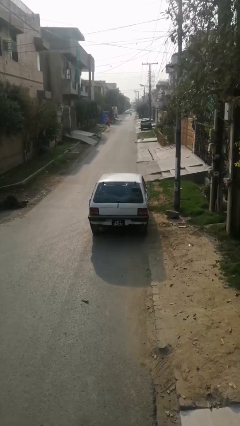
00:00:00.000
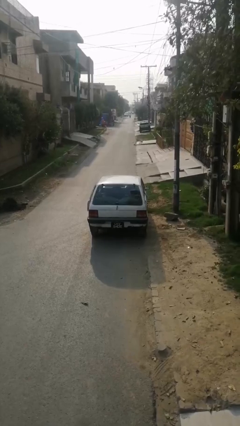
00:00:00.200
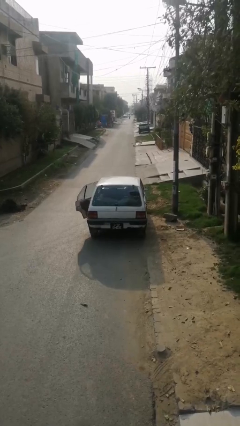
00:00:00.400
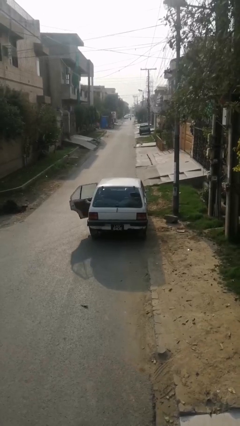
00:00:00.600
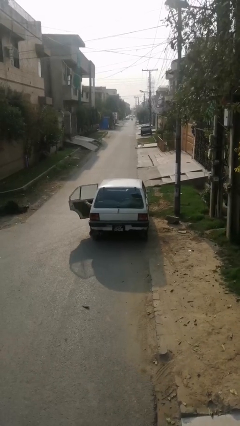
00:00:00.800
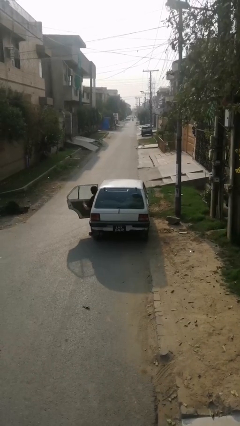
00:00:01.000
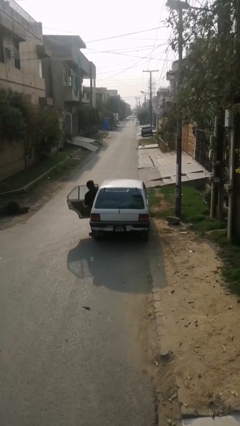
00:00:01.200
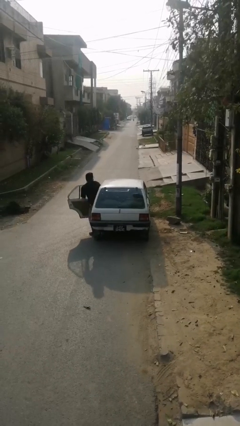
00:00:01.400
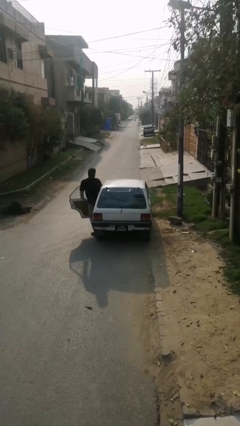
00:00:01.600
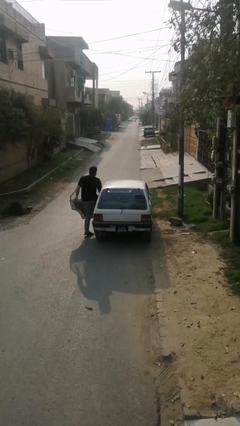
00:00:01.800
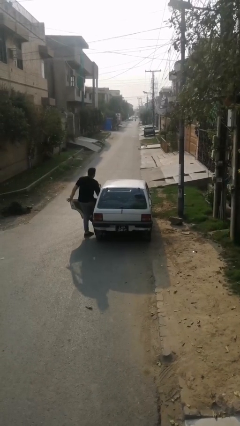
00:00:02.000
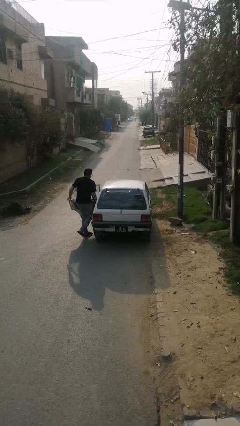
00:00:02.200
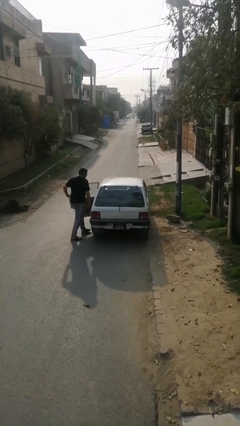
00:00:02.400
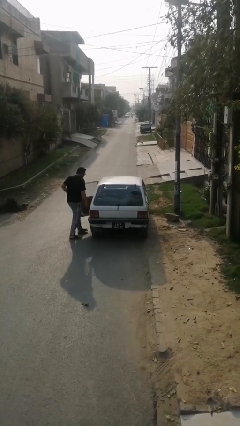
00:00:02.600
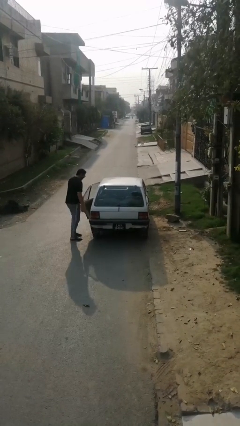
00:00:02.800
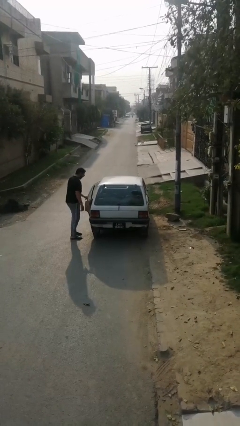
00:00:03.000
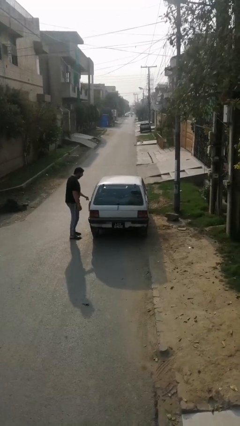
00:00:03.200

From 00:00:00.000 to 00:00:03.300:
car drops off person

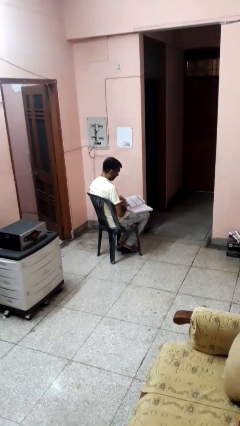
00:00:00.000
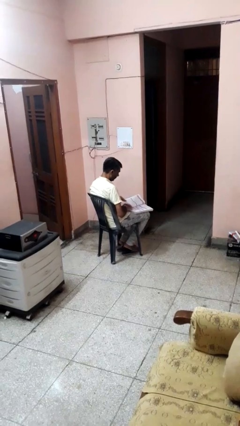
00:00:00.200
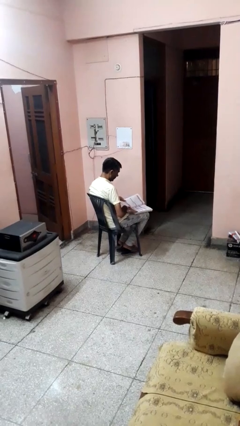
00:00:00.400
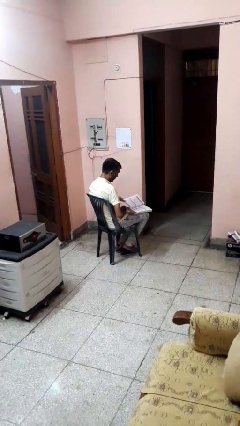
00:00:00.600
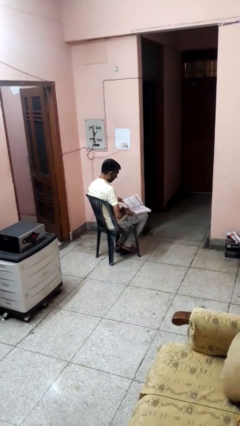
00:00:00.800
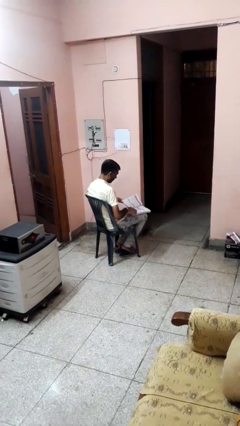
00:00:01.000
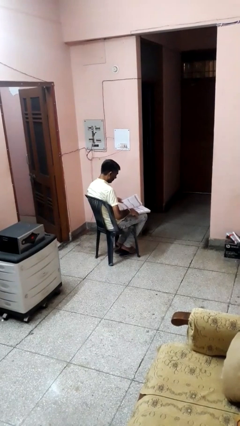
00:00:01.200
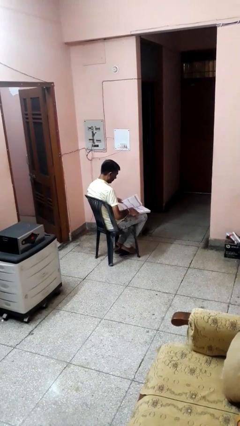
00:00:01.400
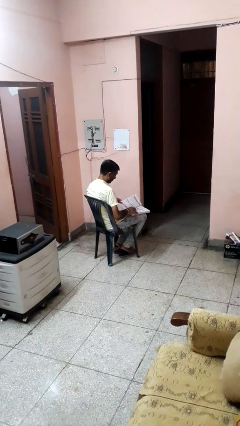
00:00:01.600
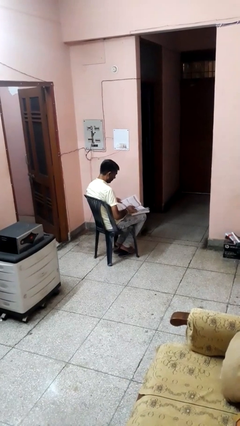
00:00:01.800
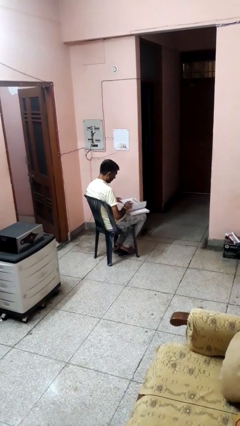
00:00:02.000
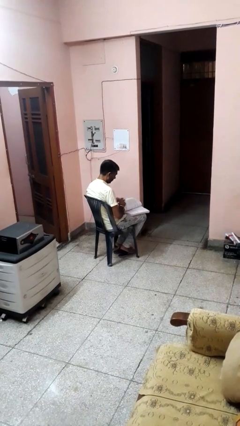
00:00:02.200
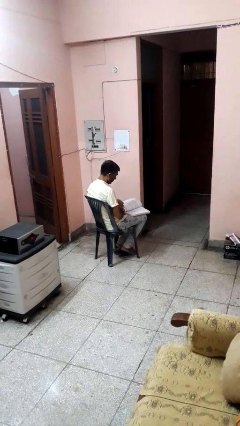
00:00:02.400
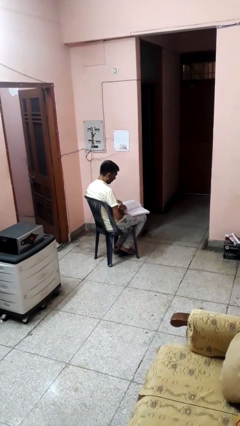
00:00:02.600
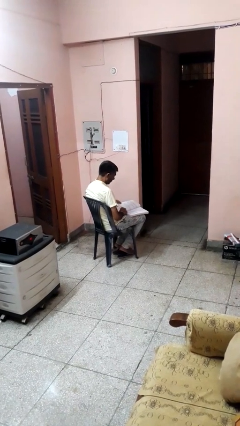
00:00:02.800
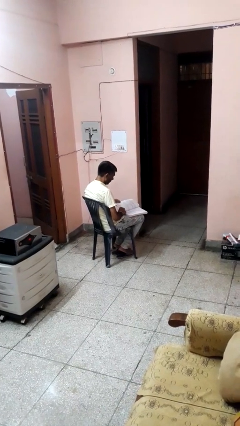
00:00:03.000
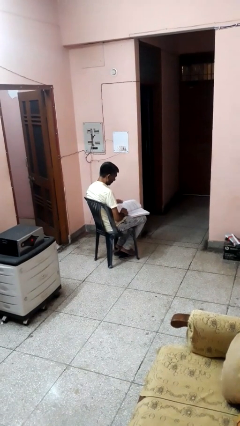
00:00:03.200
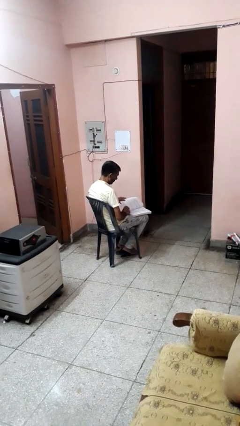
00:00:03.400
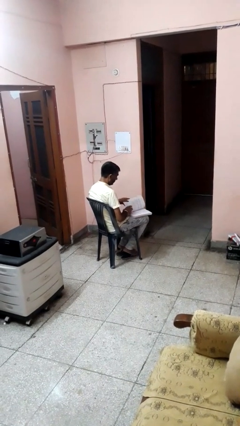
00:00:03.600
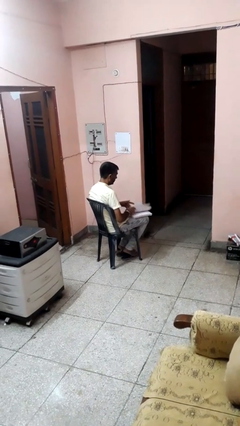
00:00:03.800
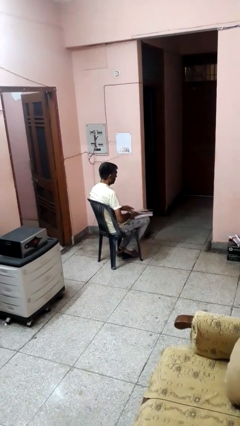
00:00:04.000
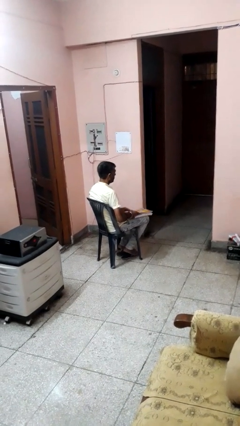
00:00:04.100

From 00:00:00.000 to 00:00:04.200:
person reads book

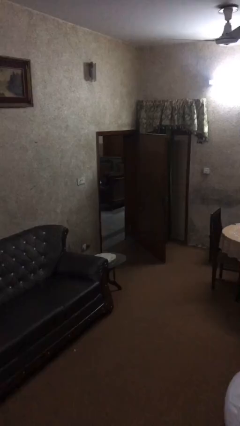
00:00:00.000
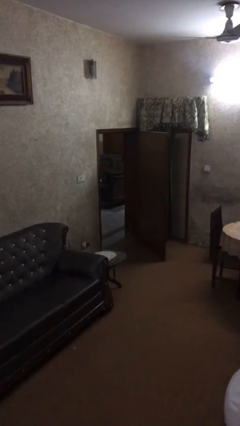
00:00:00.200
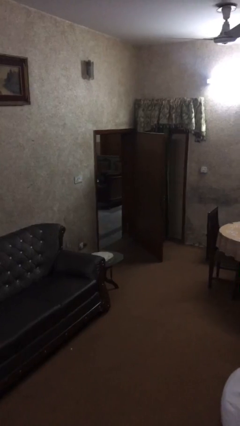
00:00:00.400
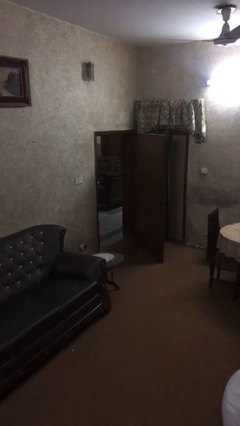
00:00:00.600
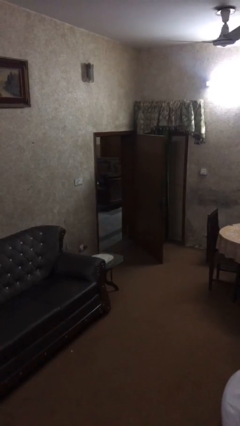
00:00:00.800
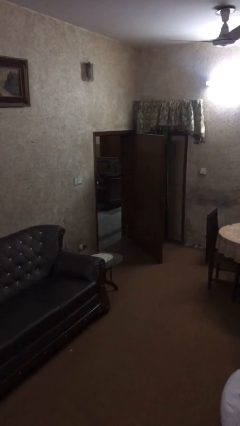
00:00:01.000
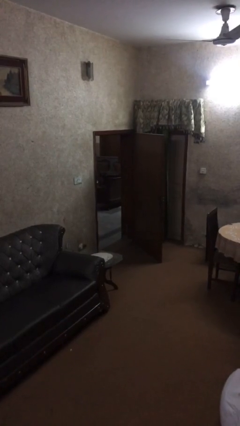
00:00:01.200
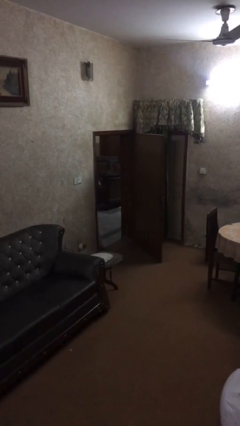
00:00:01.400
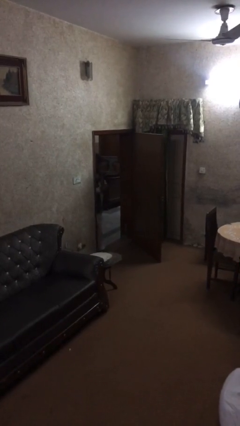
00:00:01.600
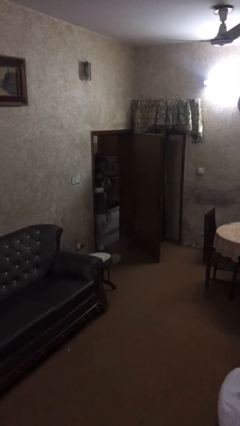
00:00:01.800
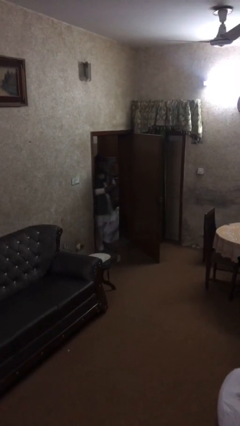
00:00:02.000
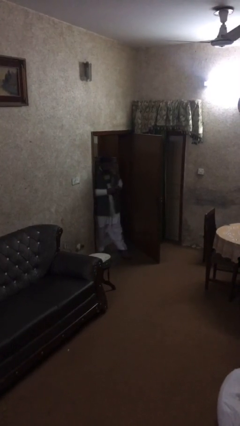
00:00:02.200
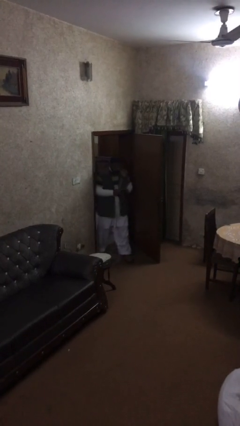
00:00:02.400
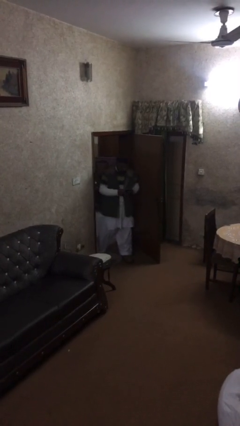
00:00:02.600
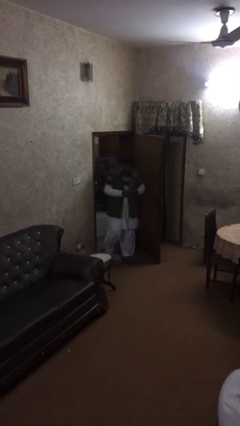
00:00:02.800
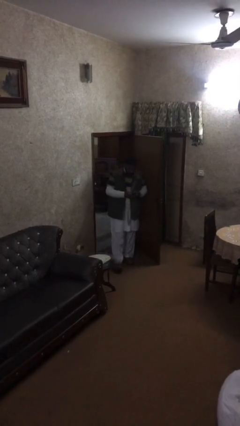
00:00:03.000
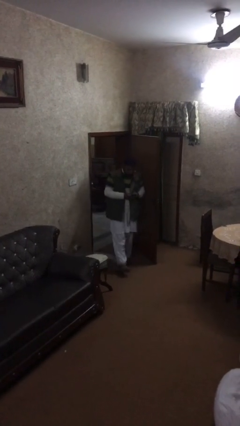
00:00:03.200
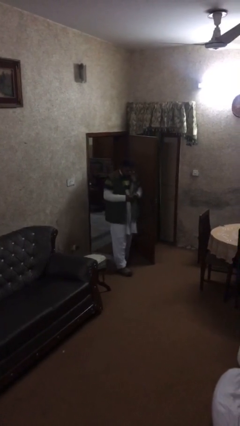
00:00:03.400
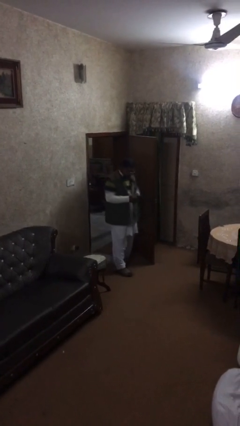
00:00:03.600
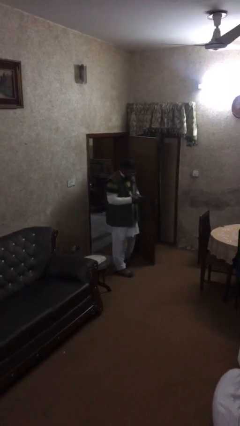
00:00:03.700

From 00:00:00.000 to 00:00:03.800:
person enters scene through structure

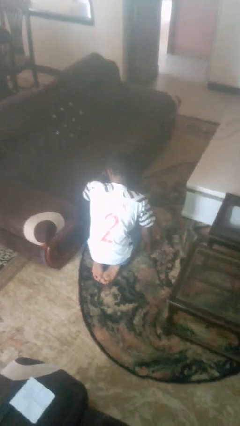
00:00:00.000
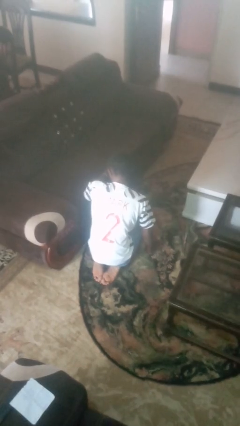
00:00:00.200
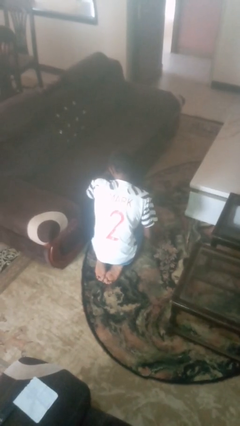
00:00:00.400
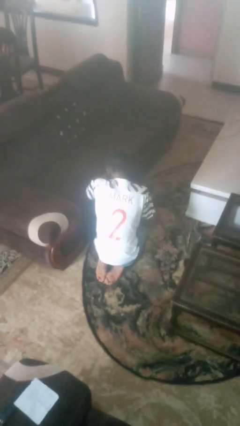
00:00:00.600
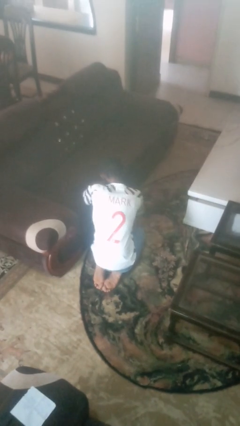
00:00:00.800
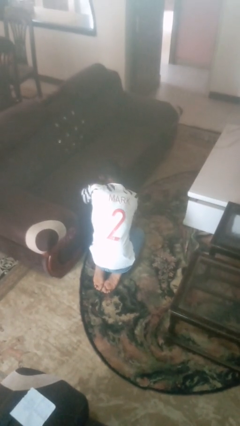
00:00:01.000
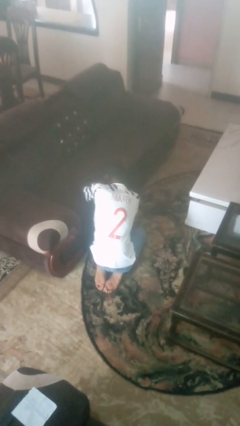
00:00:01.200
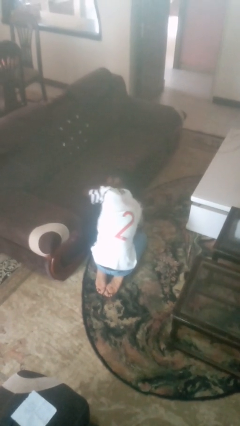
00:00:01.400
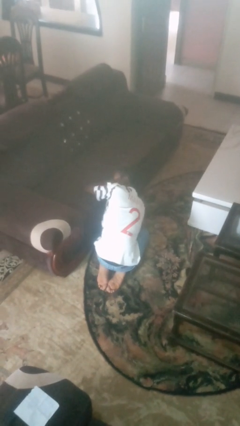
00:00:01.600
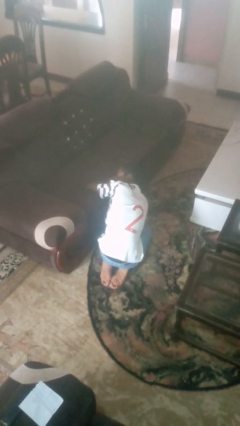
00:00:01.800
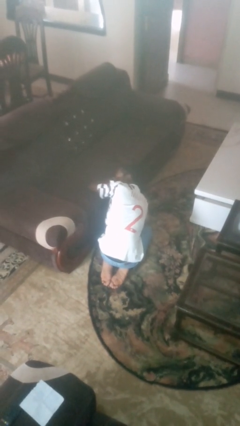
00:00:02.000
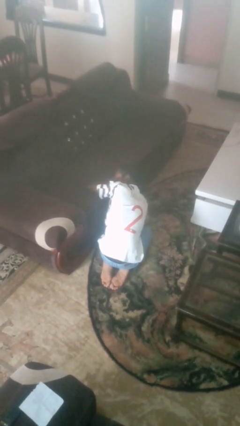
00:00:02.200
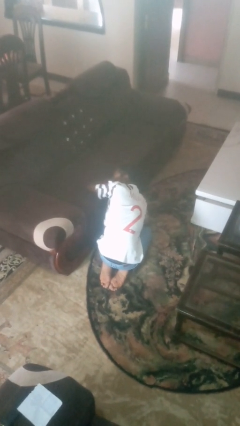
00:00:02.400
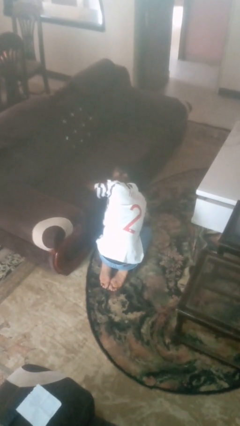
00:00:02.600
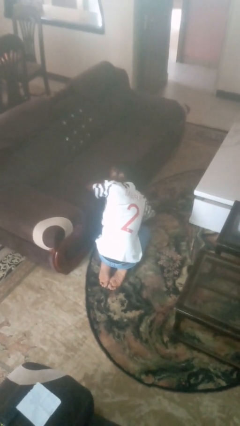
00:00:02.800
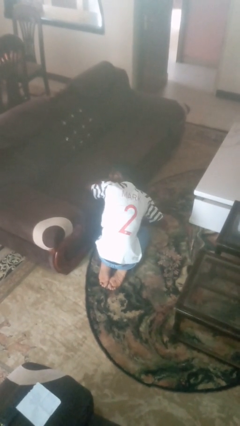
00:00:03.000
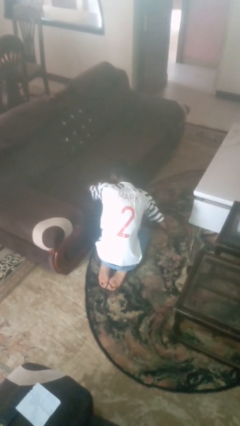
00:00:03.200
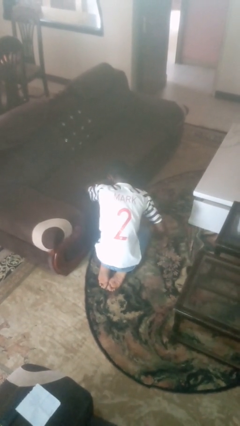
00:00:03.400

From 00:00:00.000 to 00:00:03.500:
person searches under couch

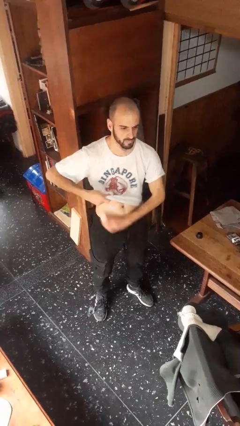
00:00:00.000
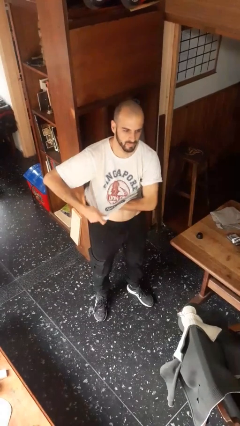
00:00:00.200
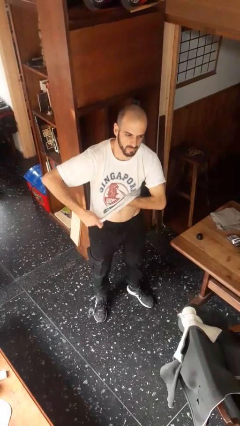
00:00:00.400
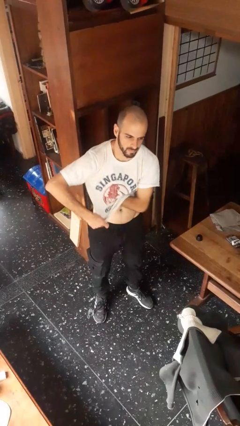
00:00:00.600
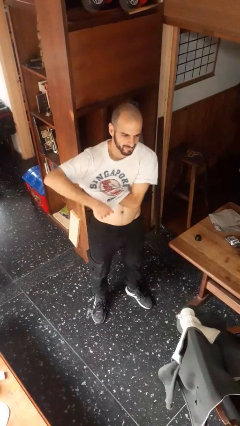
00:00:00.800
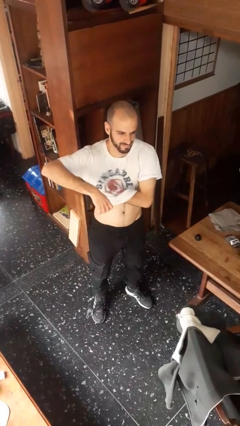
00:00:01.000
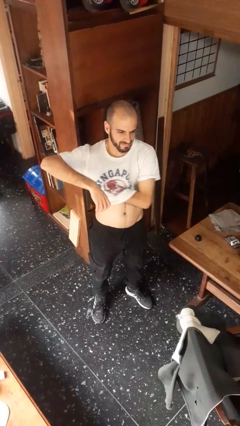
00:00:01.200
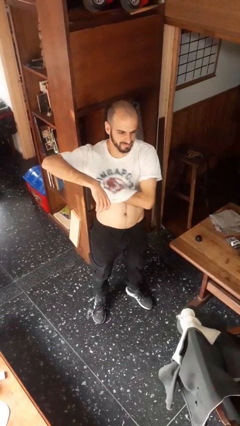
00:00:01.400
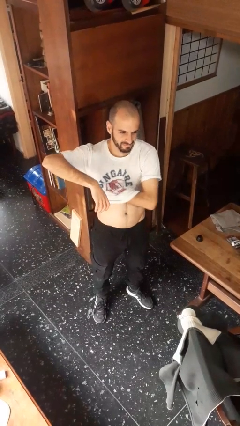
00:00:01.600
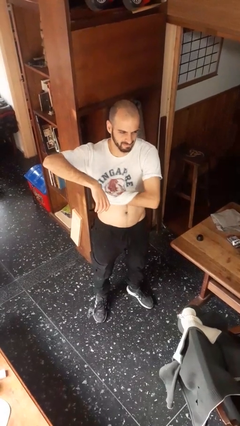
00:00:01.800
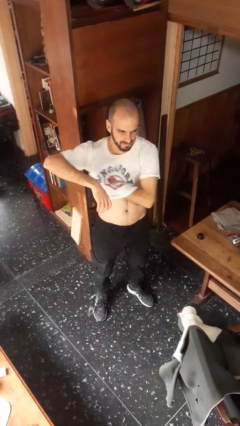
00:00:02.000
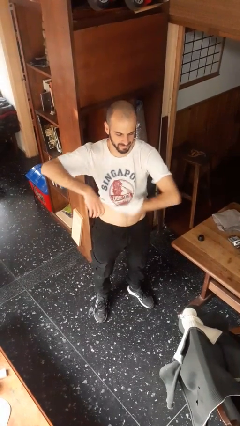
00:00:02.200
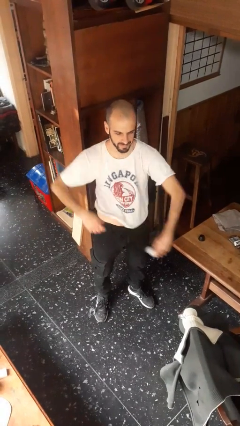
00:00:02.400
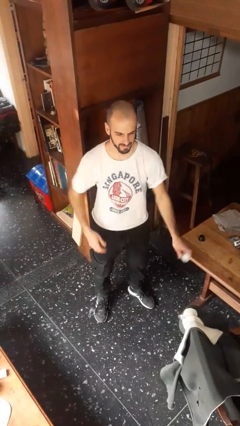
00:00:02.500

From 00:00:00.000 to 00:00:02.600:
person applies deodorant

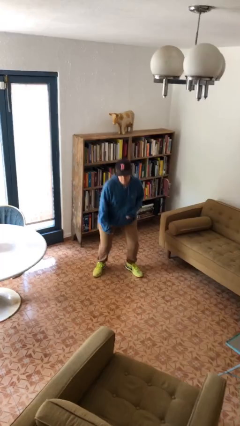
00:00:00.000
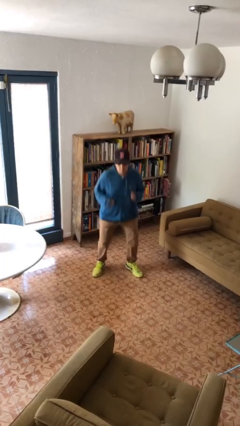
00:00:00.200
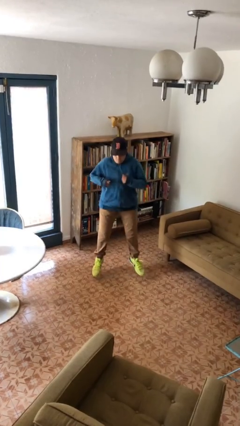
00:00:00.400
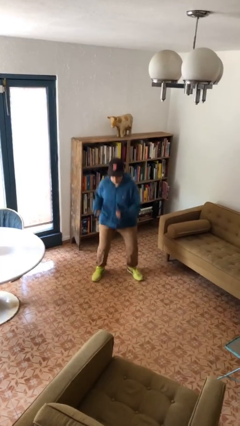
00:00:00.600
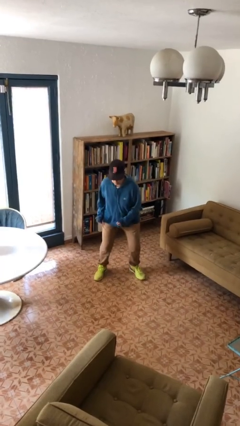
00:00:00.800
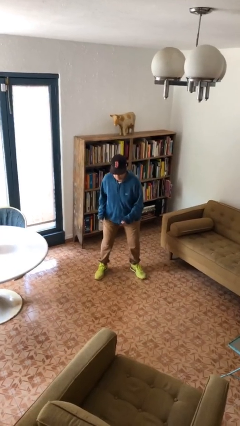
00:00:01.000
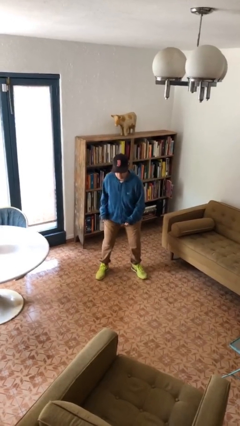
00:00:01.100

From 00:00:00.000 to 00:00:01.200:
person jumps
